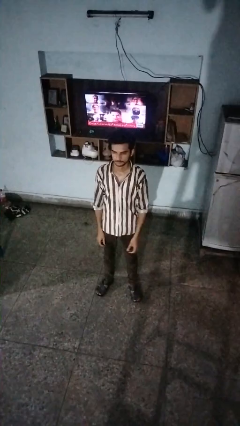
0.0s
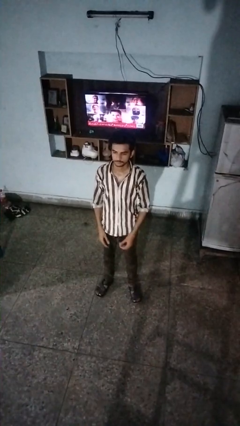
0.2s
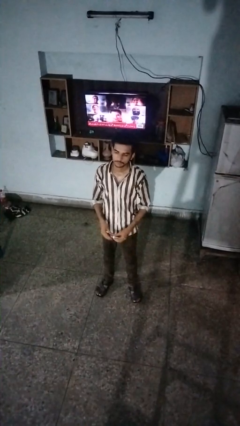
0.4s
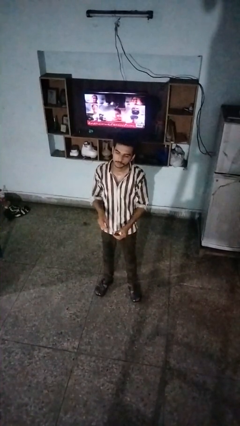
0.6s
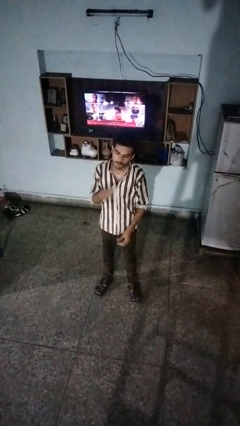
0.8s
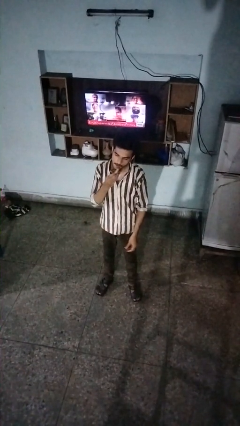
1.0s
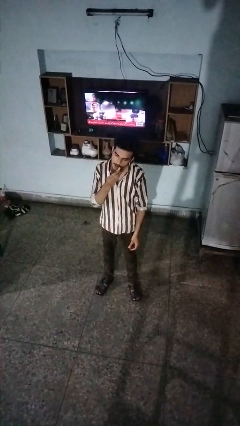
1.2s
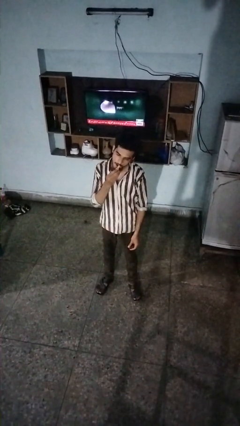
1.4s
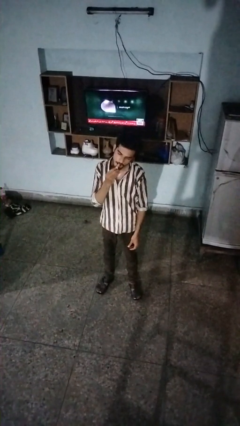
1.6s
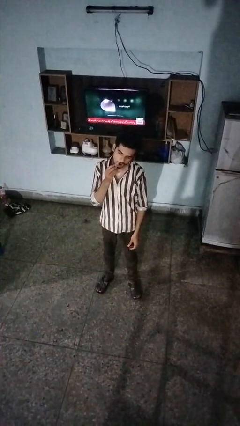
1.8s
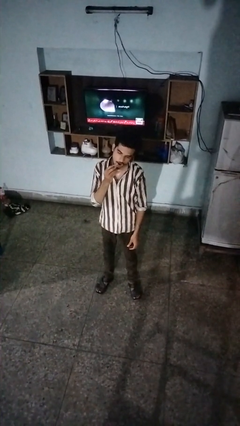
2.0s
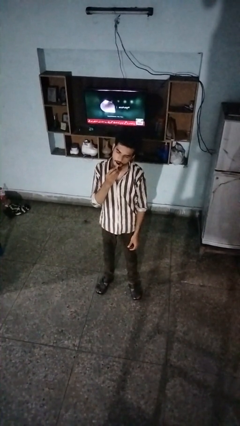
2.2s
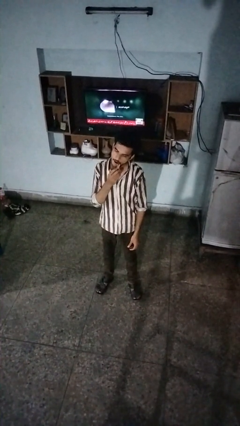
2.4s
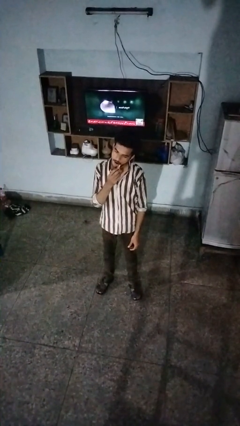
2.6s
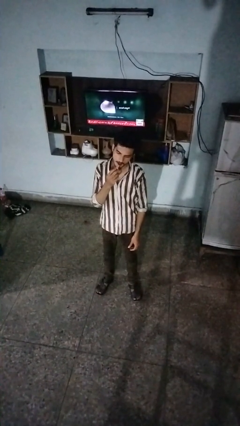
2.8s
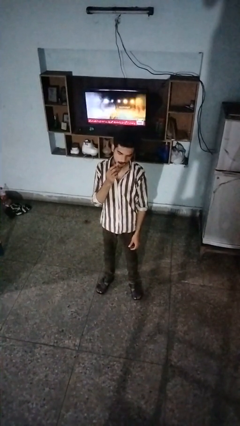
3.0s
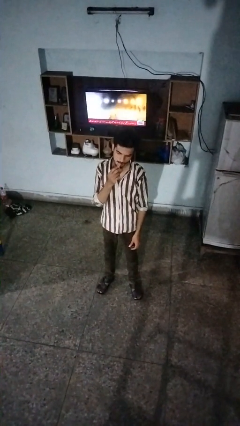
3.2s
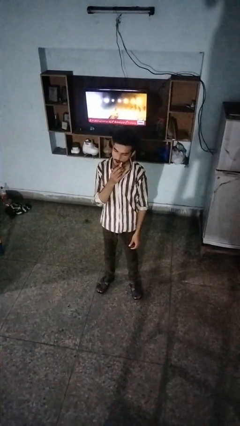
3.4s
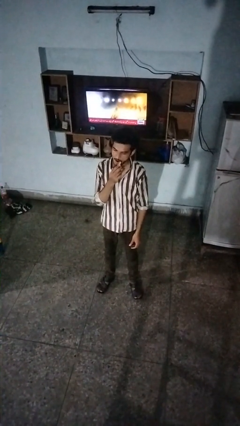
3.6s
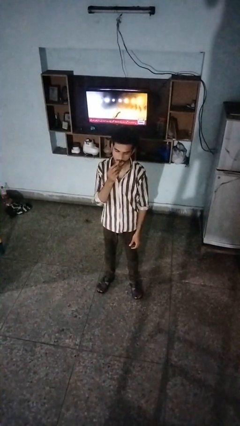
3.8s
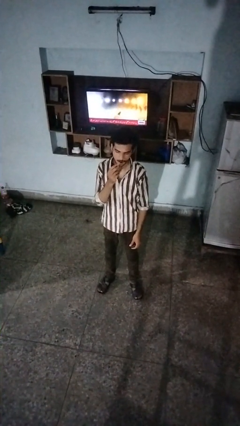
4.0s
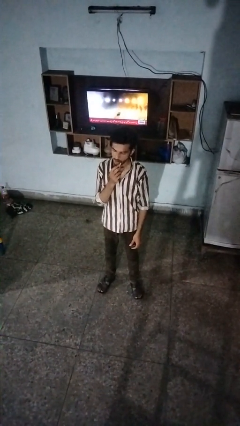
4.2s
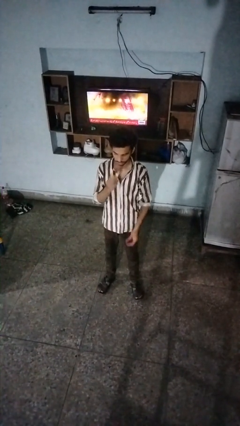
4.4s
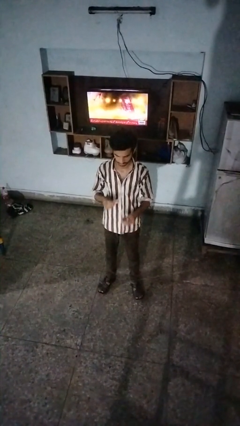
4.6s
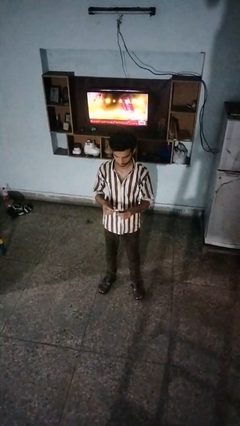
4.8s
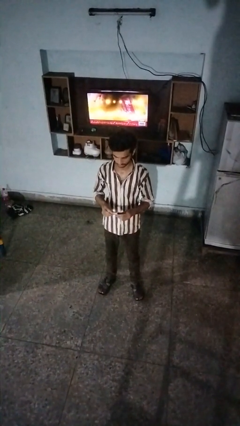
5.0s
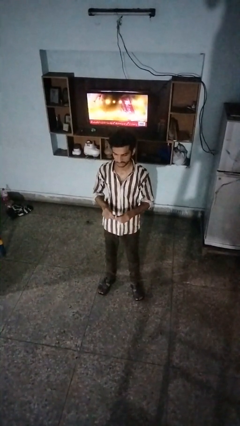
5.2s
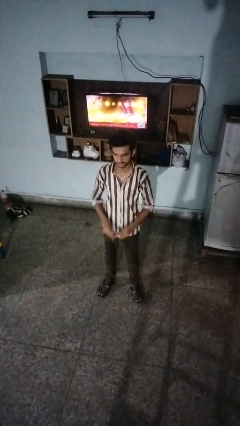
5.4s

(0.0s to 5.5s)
person applies lip makeup

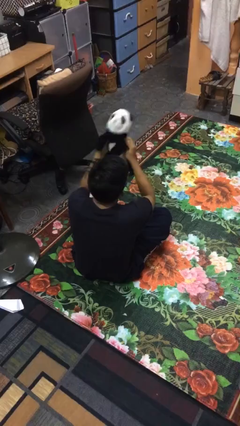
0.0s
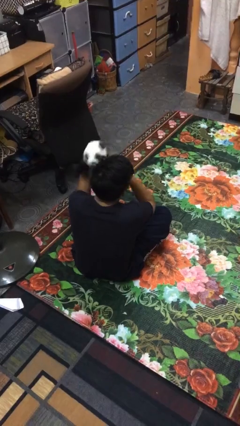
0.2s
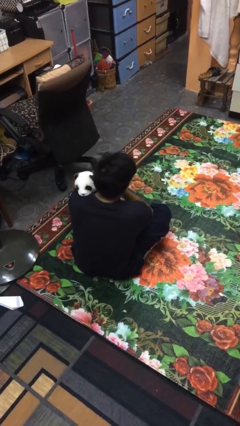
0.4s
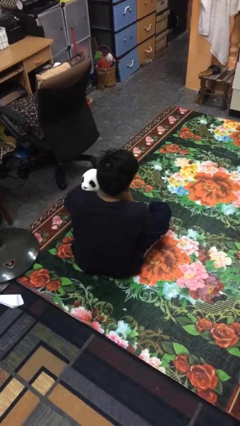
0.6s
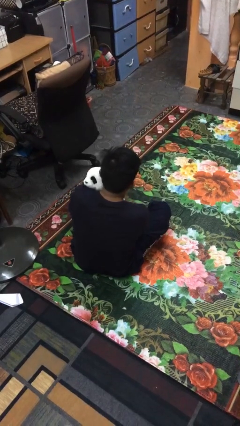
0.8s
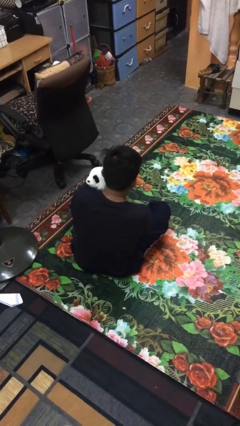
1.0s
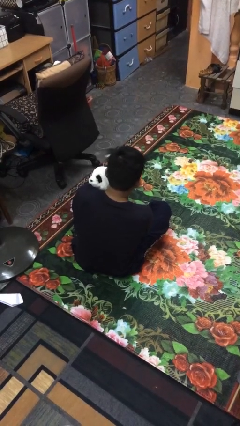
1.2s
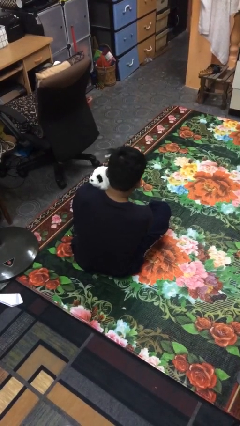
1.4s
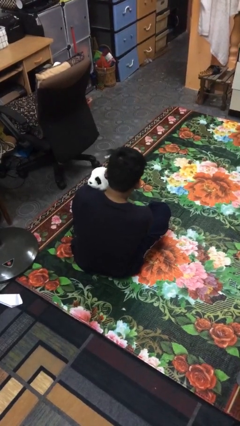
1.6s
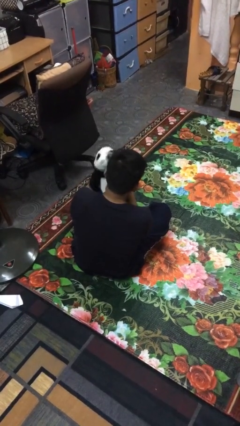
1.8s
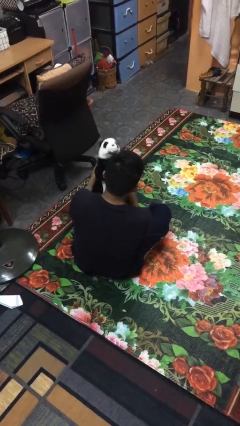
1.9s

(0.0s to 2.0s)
person hugs stuffed animal

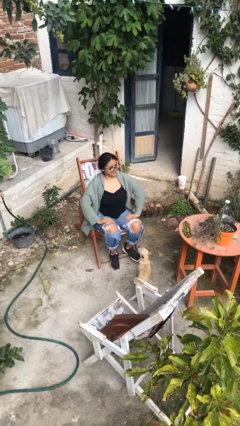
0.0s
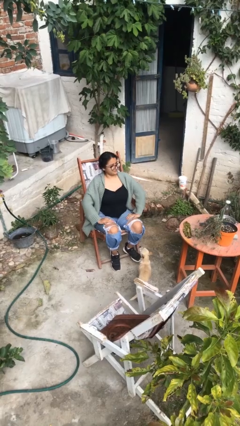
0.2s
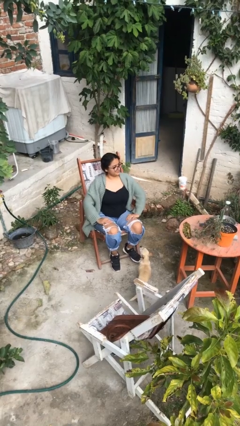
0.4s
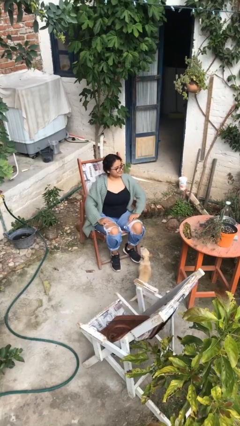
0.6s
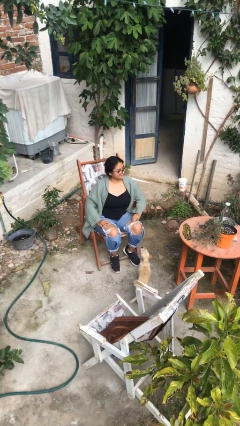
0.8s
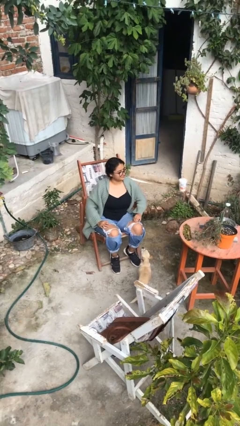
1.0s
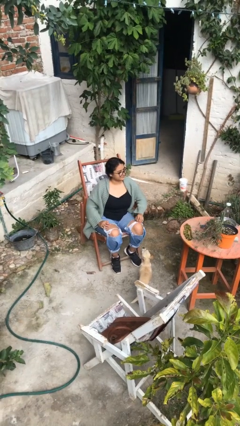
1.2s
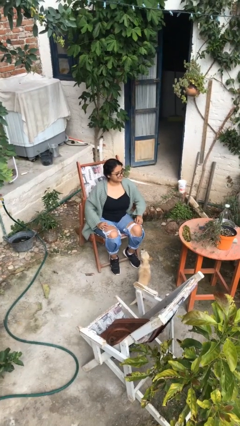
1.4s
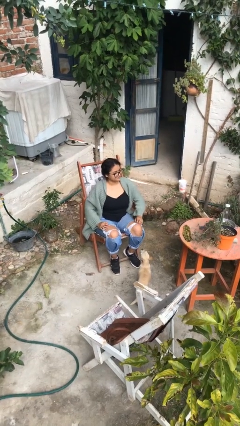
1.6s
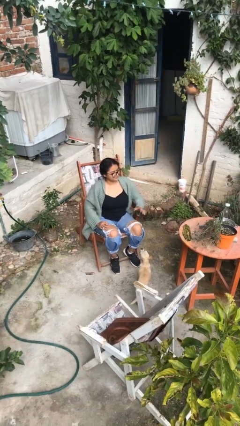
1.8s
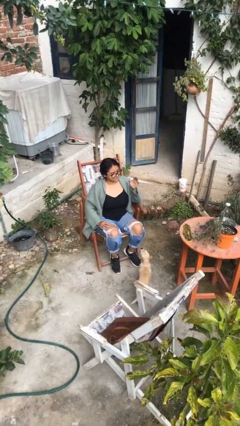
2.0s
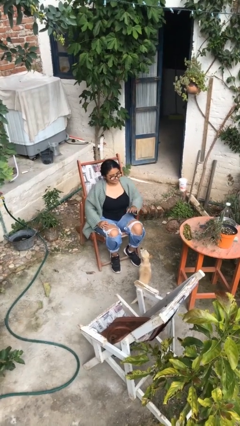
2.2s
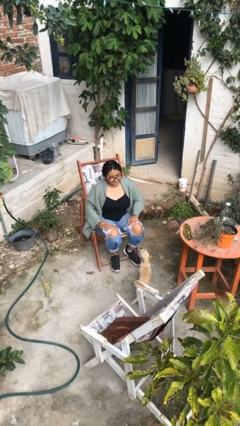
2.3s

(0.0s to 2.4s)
person slaps hands on thighs

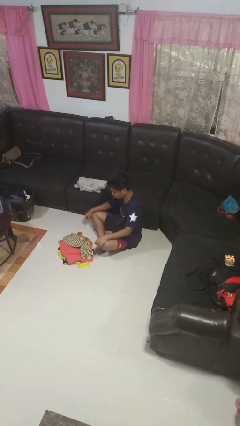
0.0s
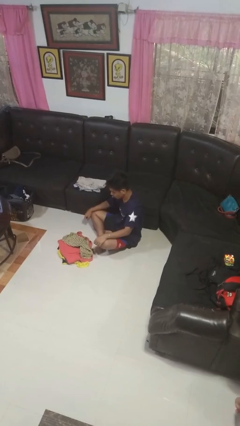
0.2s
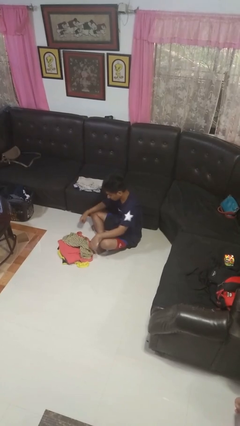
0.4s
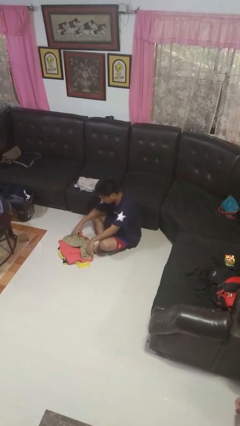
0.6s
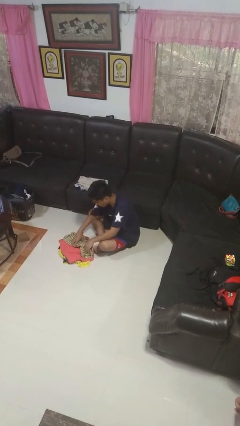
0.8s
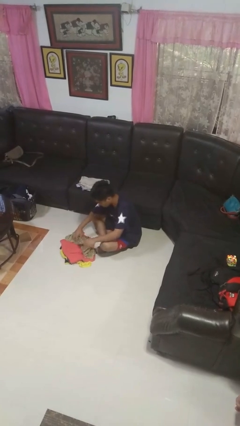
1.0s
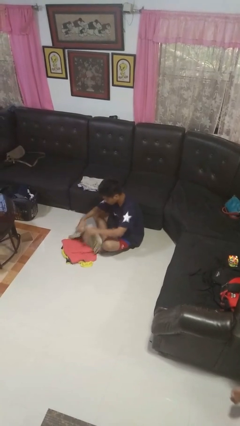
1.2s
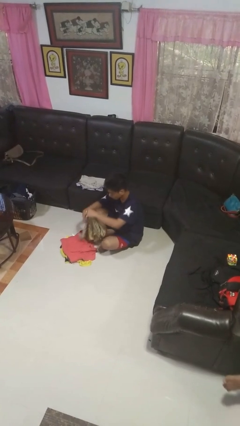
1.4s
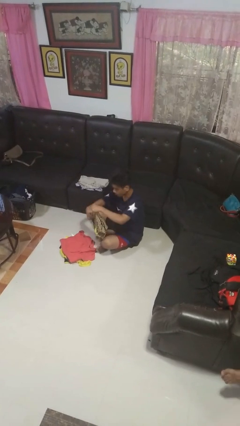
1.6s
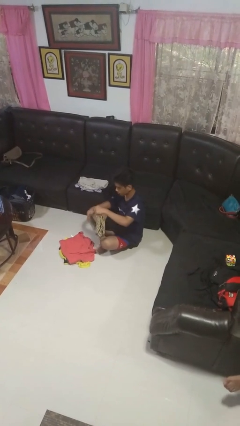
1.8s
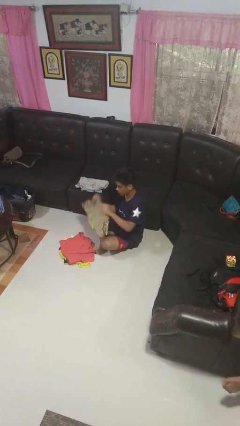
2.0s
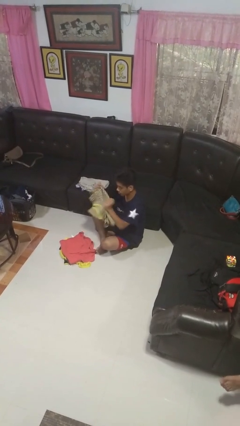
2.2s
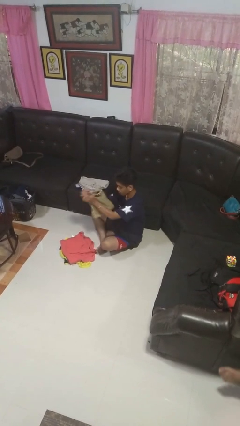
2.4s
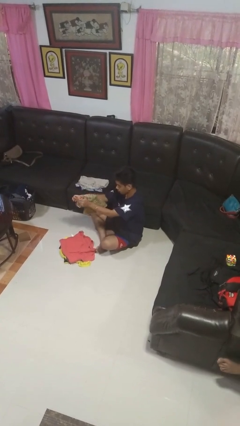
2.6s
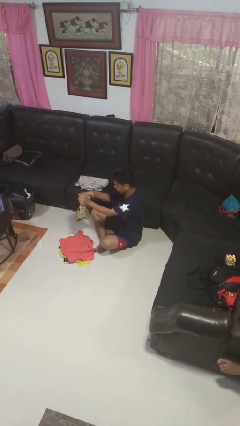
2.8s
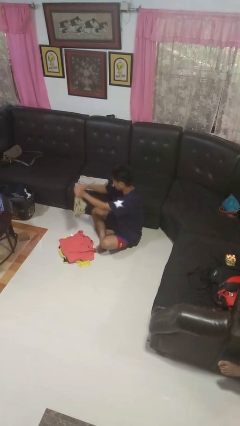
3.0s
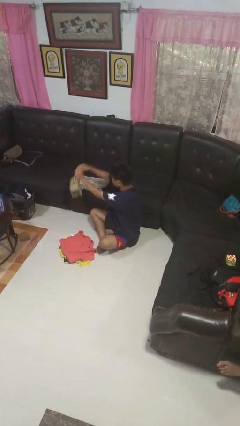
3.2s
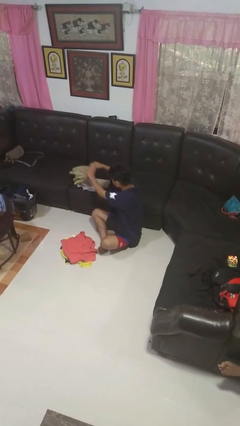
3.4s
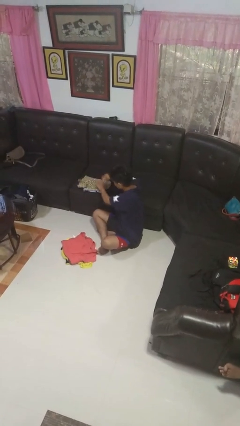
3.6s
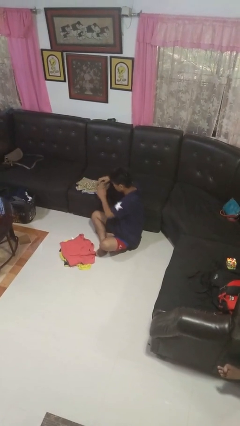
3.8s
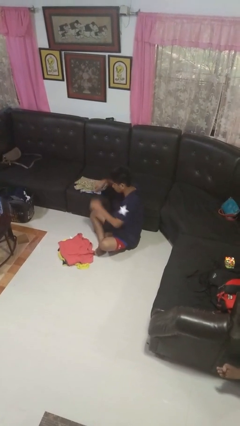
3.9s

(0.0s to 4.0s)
person folds shirt

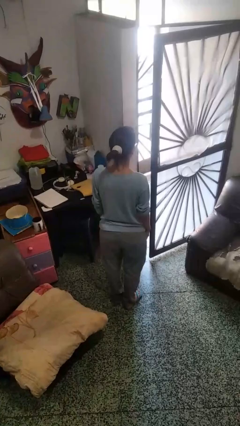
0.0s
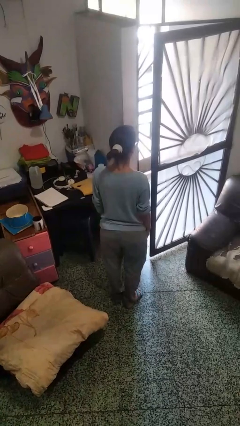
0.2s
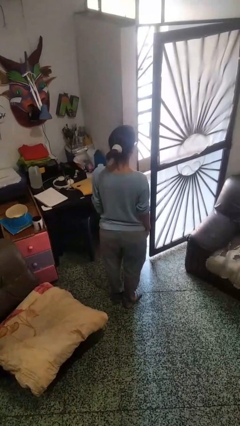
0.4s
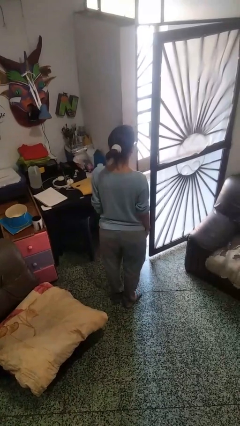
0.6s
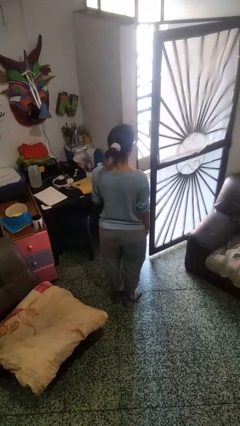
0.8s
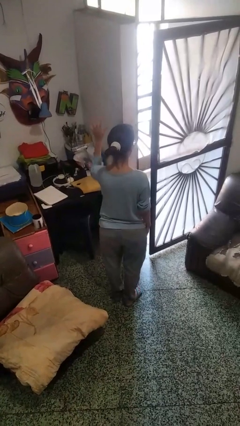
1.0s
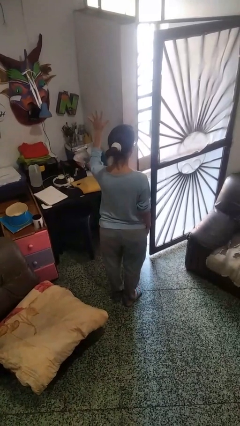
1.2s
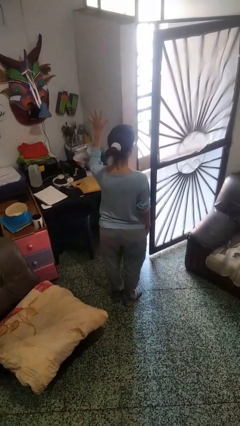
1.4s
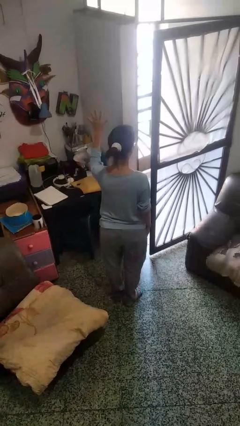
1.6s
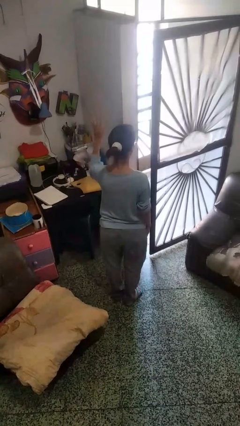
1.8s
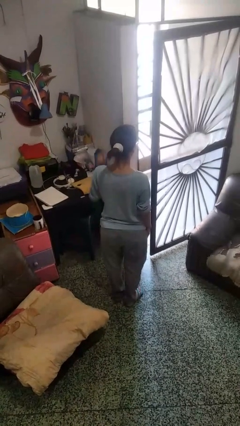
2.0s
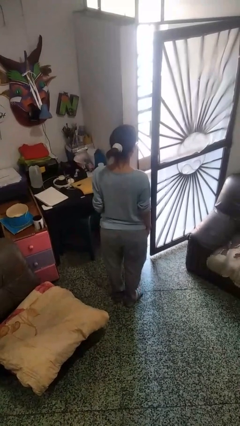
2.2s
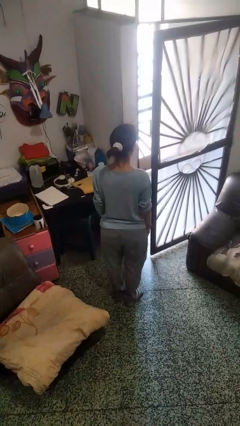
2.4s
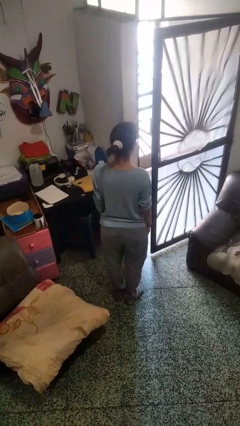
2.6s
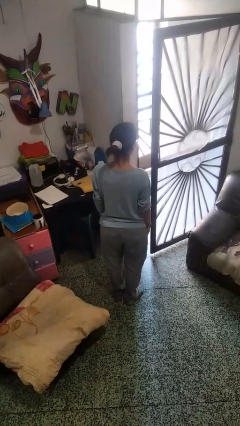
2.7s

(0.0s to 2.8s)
person gestures number five

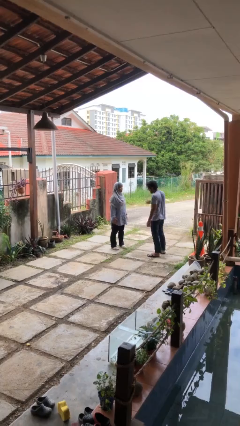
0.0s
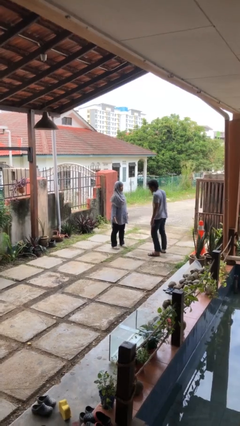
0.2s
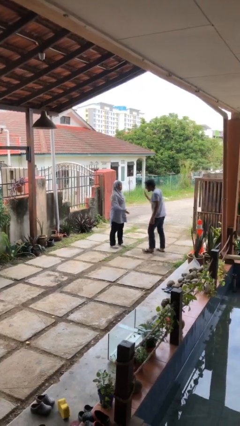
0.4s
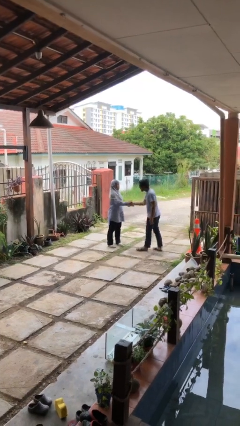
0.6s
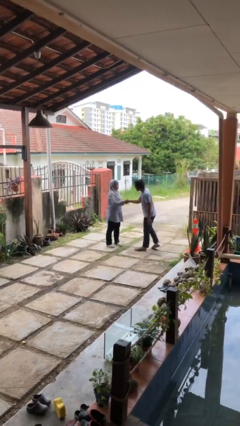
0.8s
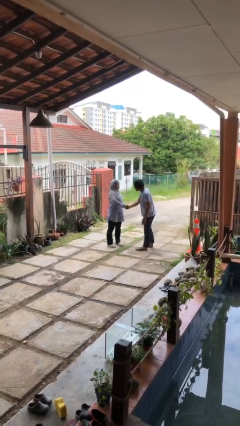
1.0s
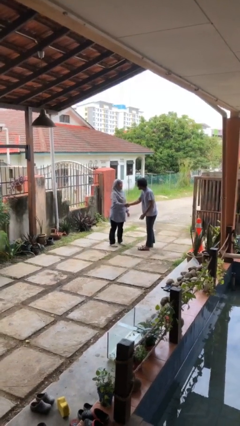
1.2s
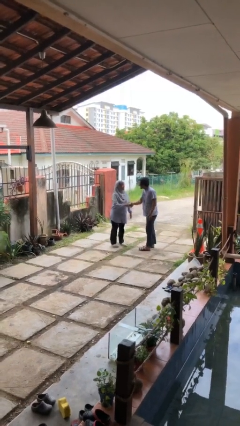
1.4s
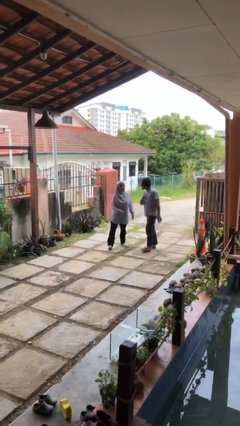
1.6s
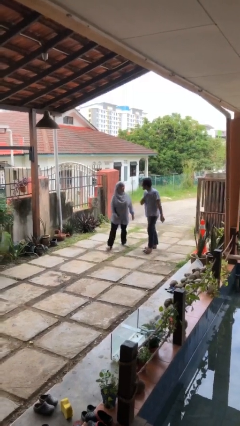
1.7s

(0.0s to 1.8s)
person shakes hand
